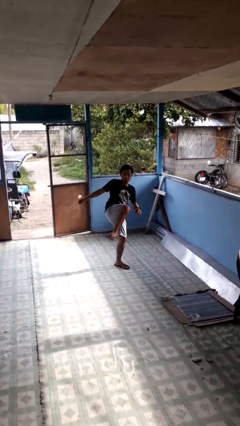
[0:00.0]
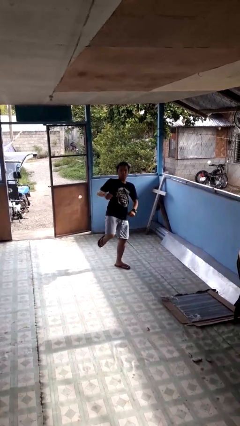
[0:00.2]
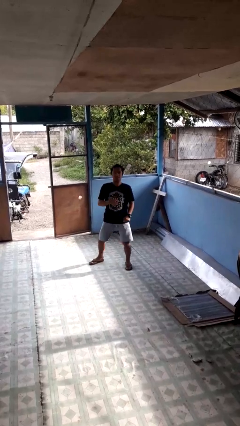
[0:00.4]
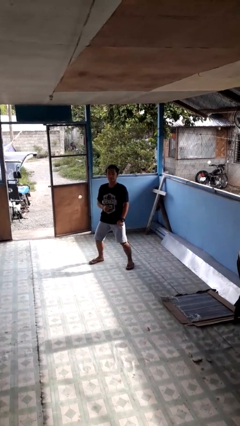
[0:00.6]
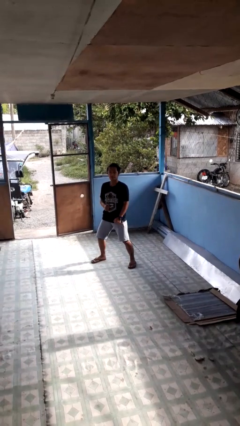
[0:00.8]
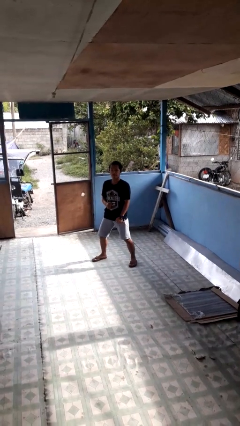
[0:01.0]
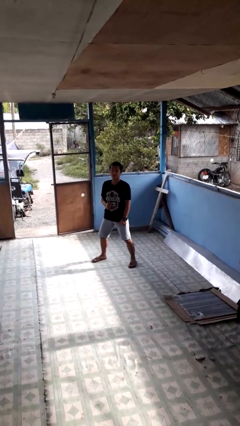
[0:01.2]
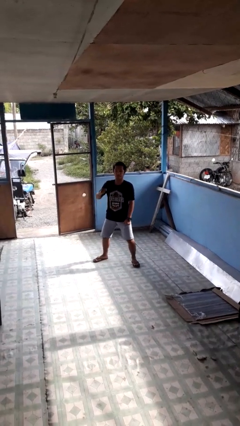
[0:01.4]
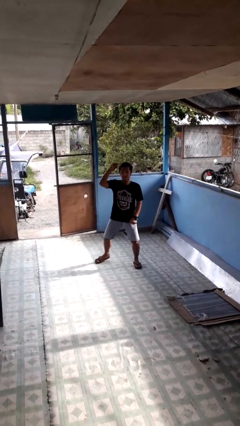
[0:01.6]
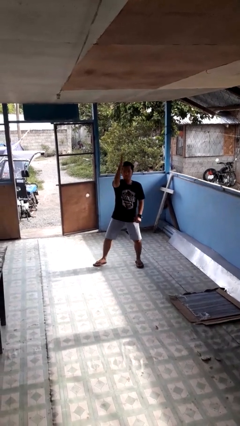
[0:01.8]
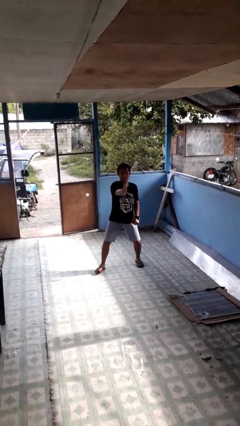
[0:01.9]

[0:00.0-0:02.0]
person karate kicks

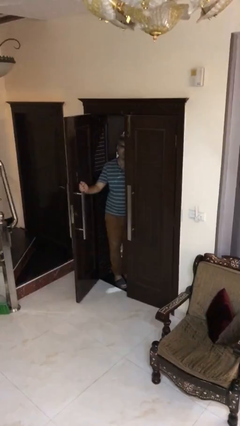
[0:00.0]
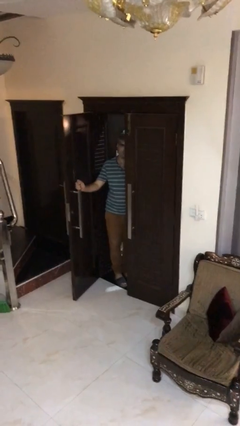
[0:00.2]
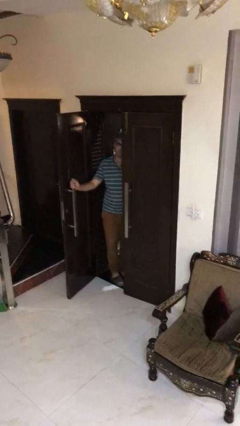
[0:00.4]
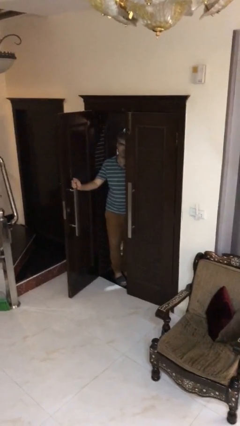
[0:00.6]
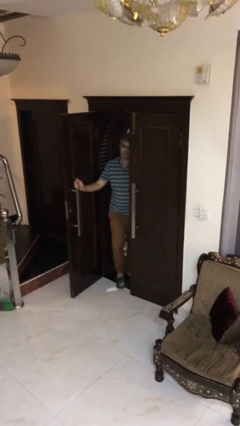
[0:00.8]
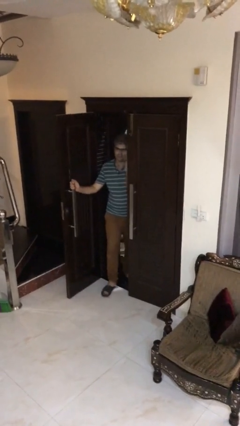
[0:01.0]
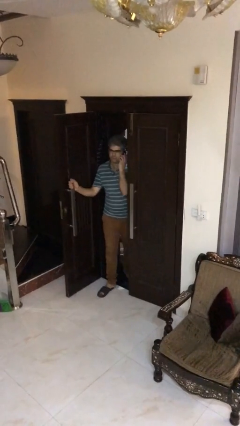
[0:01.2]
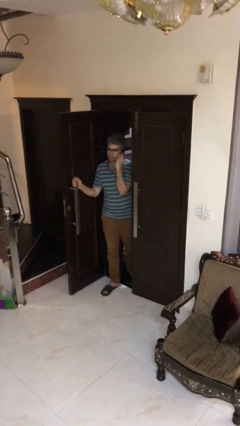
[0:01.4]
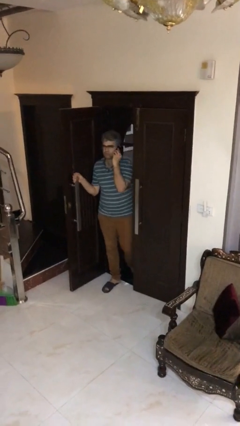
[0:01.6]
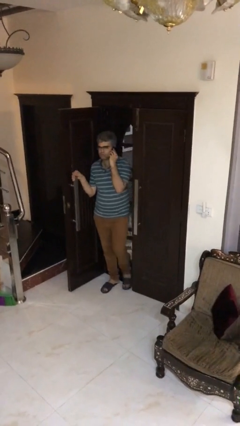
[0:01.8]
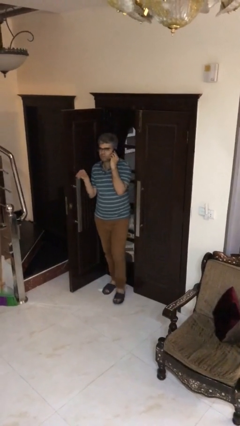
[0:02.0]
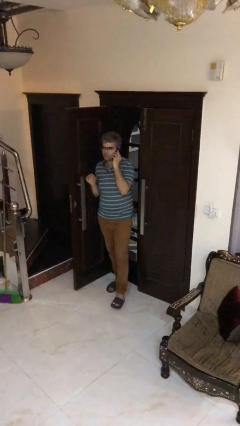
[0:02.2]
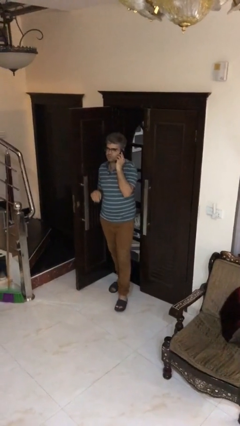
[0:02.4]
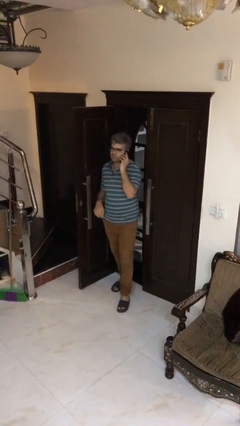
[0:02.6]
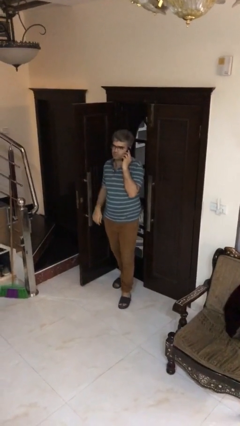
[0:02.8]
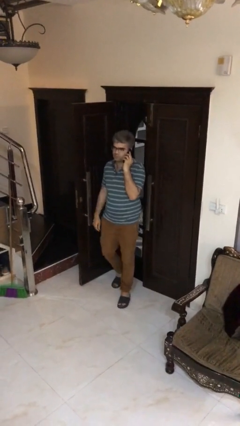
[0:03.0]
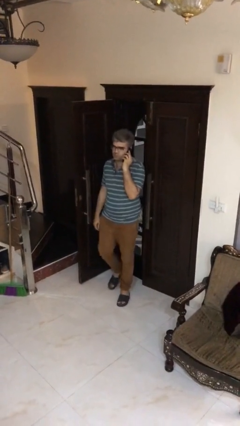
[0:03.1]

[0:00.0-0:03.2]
person enters scene through structure

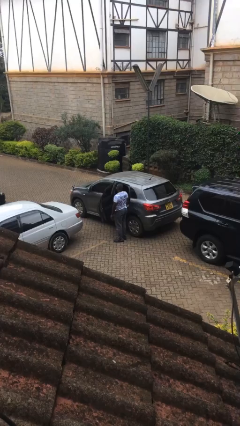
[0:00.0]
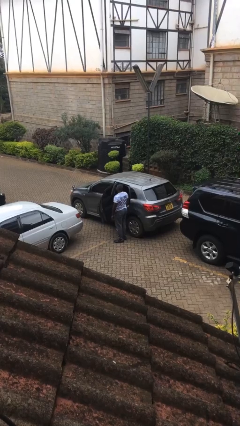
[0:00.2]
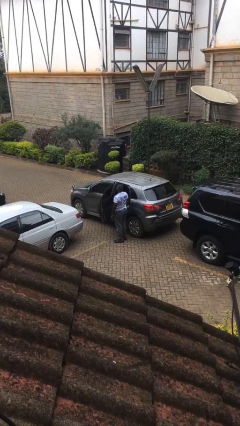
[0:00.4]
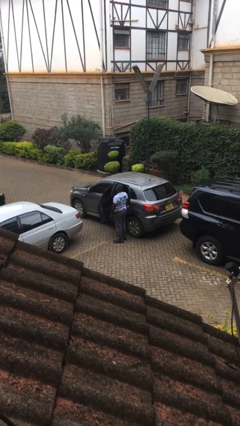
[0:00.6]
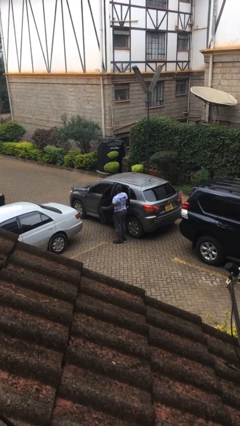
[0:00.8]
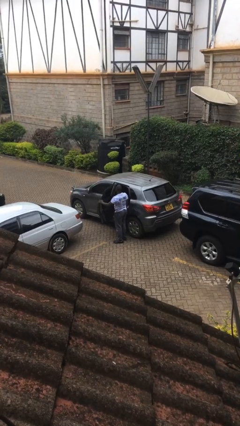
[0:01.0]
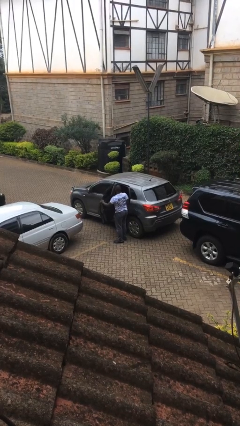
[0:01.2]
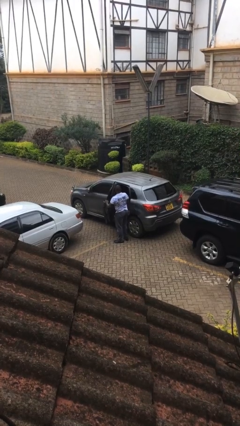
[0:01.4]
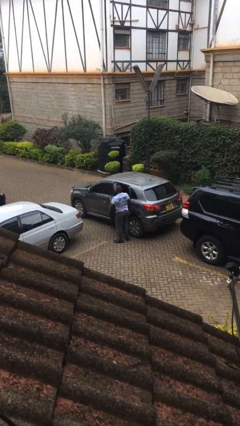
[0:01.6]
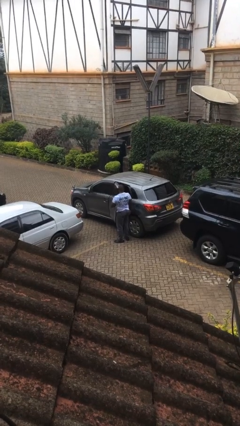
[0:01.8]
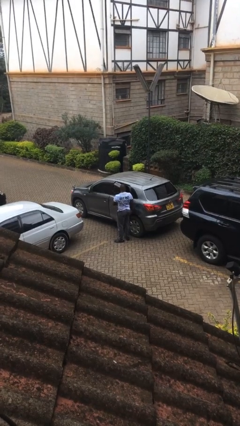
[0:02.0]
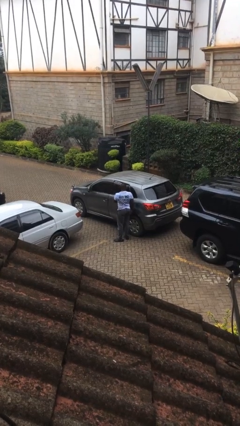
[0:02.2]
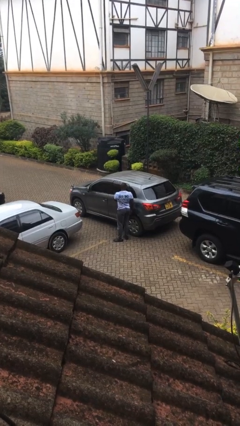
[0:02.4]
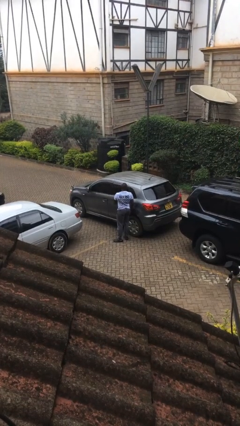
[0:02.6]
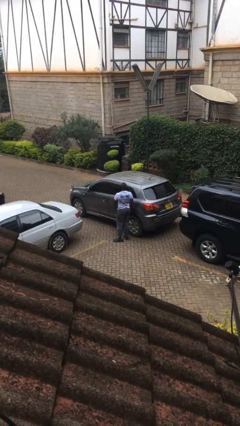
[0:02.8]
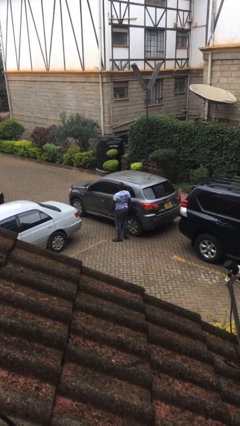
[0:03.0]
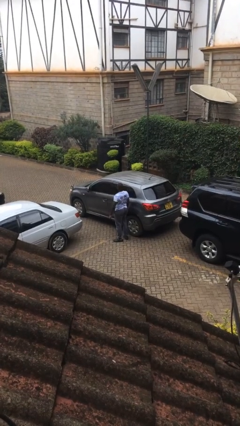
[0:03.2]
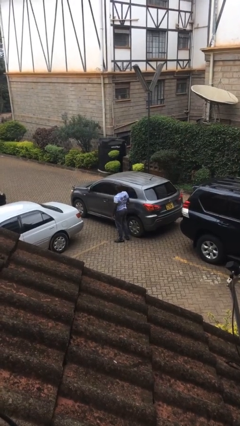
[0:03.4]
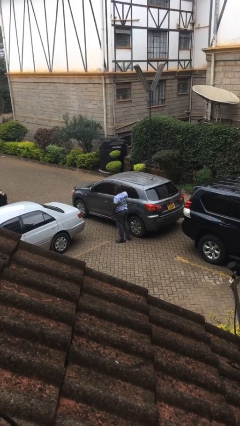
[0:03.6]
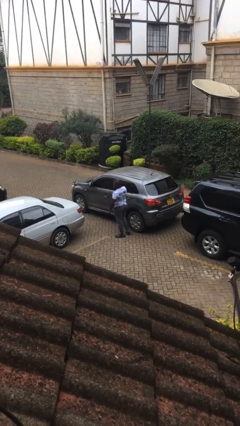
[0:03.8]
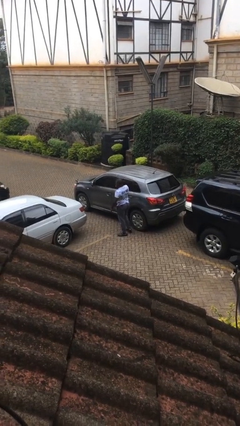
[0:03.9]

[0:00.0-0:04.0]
person closes car door

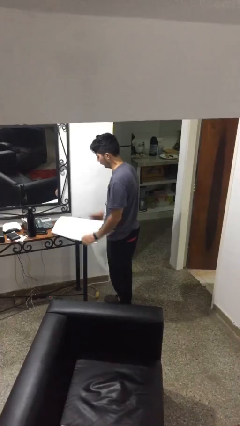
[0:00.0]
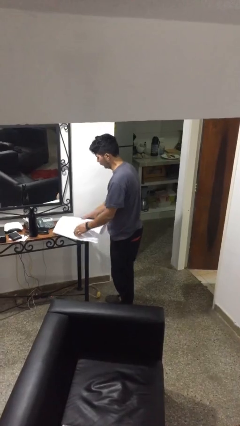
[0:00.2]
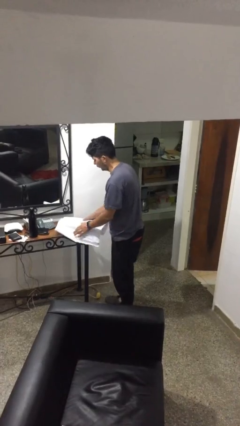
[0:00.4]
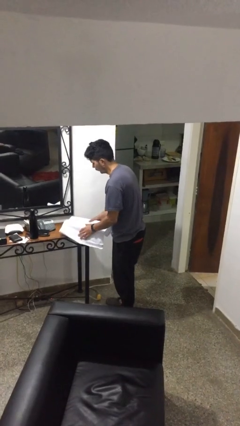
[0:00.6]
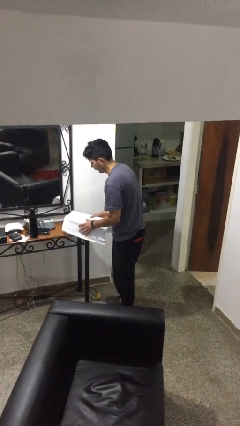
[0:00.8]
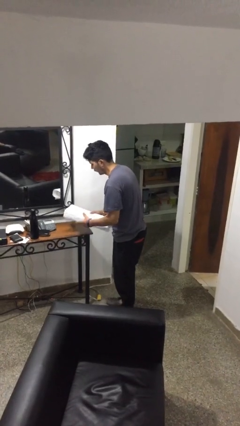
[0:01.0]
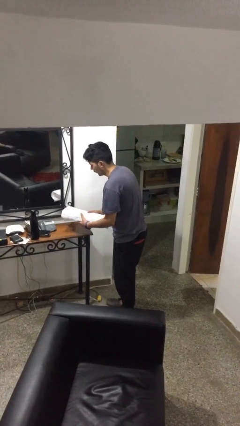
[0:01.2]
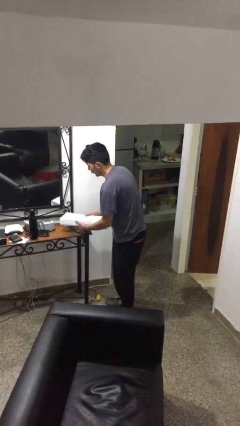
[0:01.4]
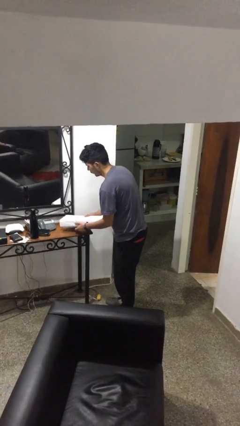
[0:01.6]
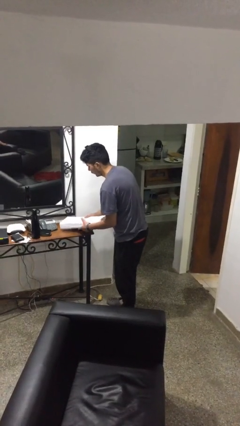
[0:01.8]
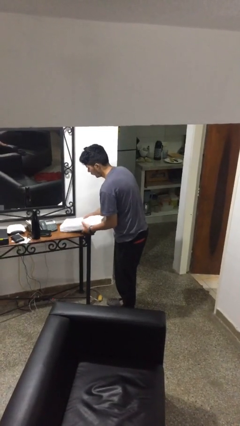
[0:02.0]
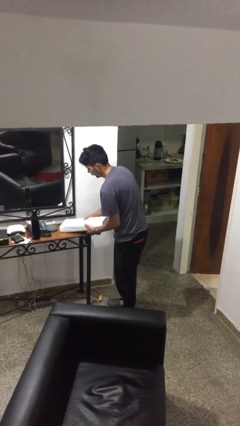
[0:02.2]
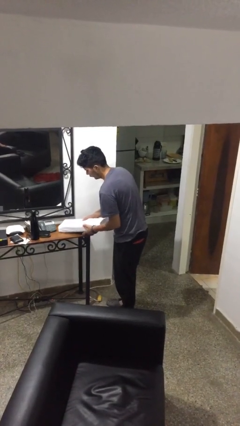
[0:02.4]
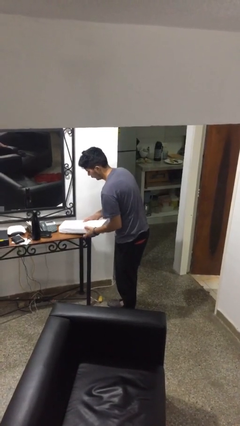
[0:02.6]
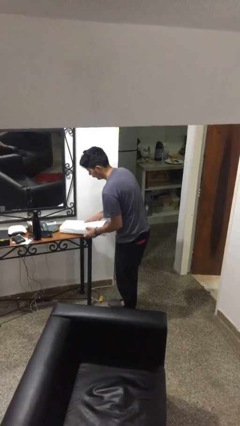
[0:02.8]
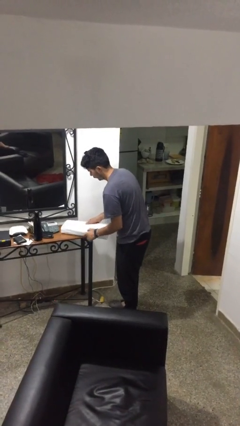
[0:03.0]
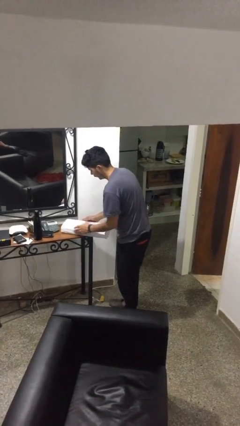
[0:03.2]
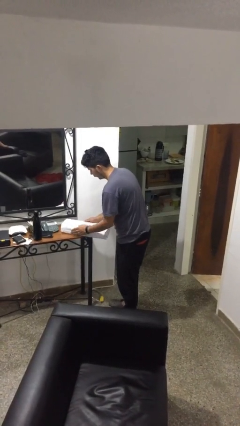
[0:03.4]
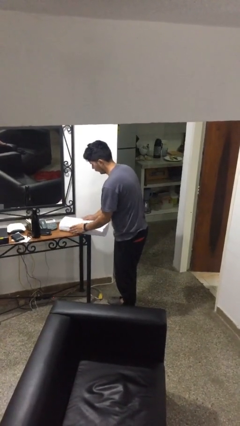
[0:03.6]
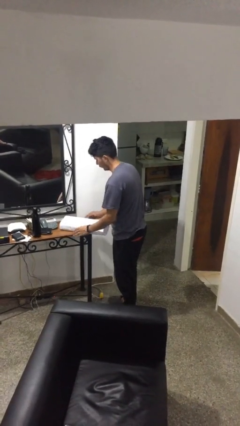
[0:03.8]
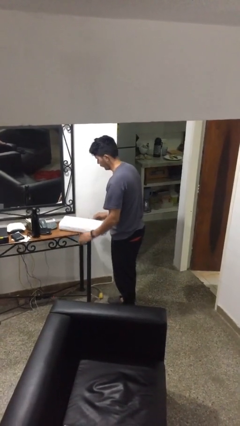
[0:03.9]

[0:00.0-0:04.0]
person wraps box

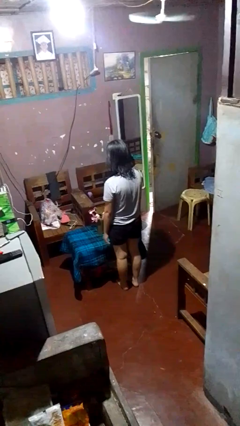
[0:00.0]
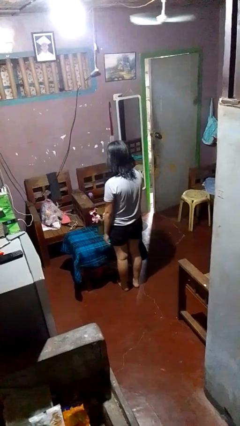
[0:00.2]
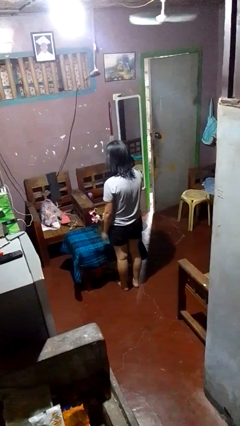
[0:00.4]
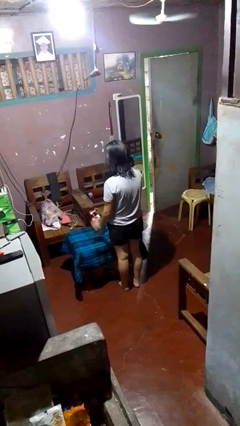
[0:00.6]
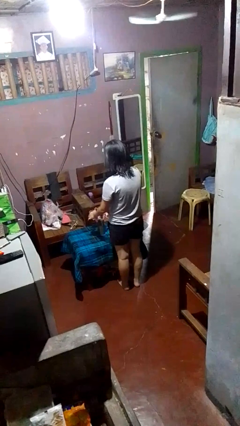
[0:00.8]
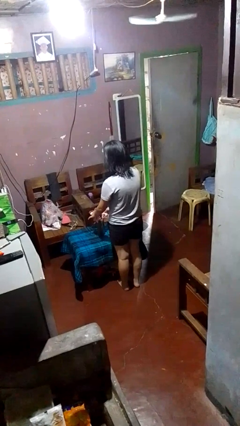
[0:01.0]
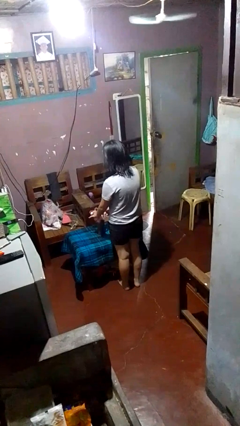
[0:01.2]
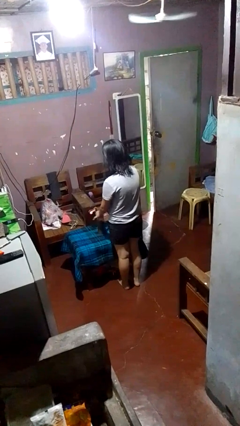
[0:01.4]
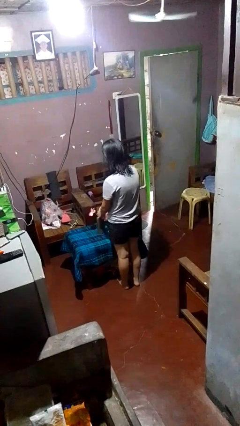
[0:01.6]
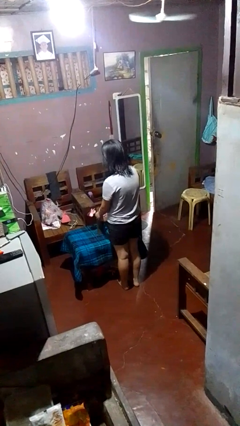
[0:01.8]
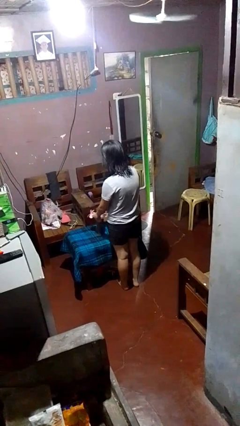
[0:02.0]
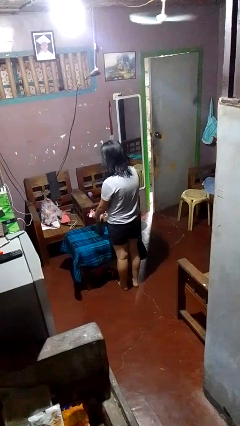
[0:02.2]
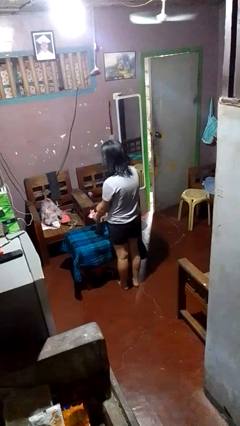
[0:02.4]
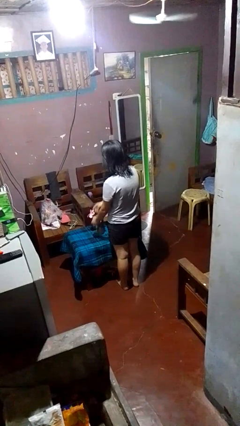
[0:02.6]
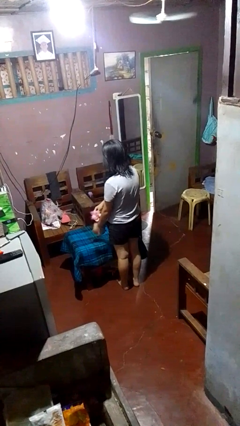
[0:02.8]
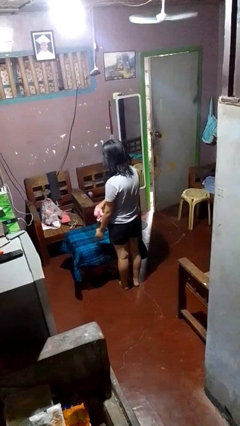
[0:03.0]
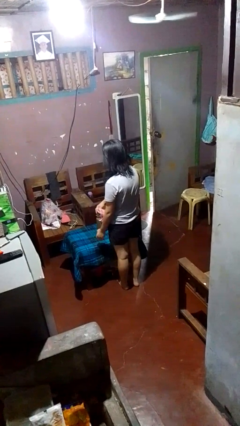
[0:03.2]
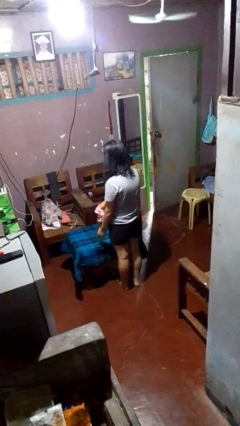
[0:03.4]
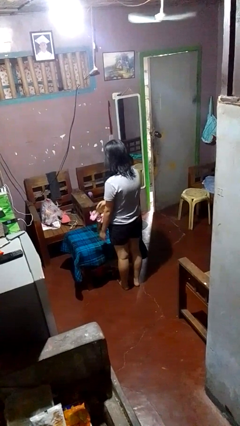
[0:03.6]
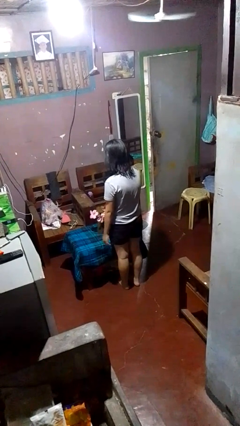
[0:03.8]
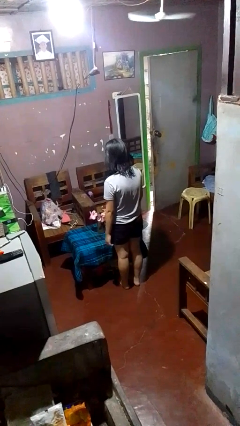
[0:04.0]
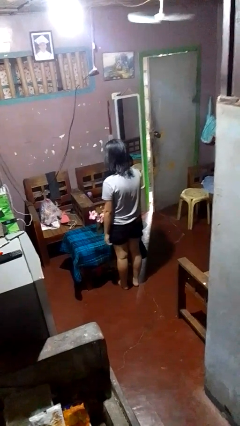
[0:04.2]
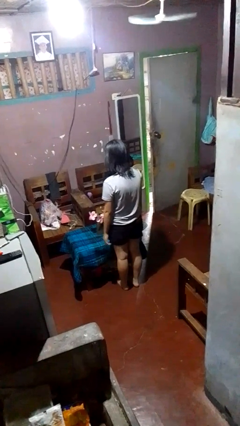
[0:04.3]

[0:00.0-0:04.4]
person arranges flowers in vase
